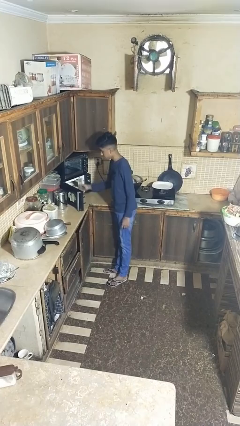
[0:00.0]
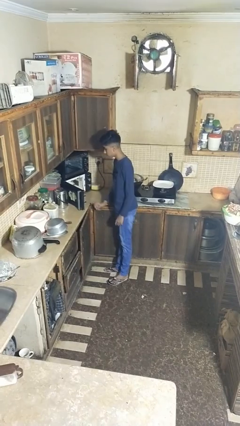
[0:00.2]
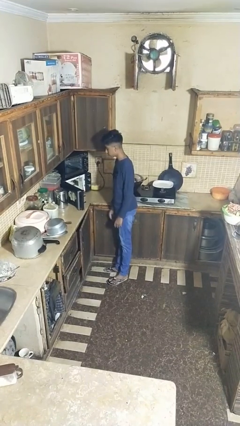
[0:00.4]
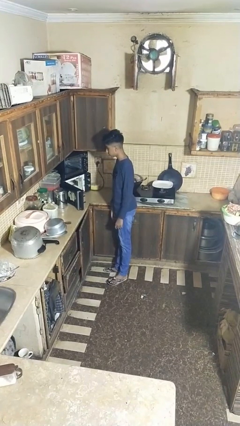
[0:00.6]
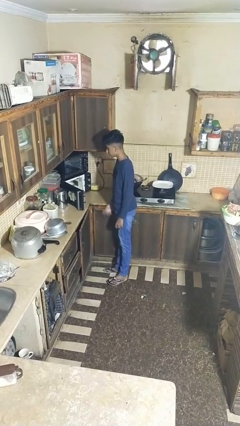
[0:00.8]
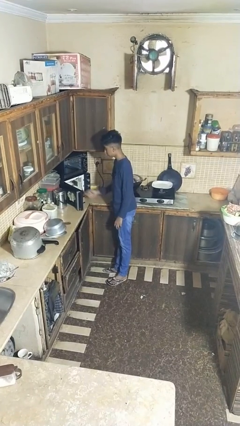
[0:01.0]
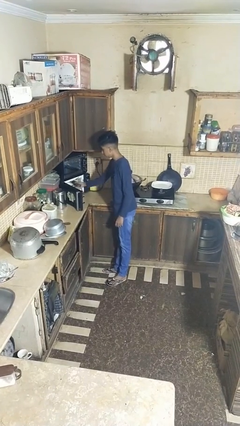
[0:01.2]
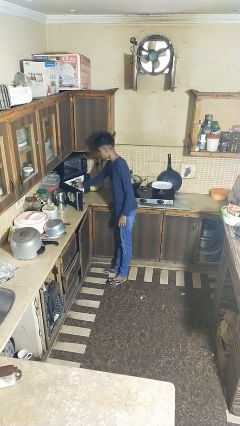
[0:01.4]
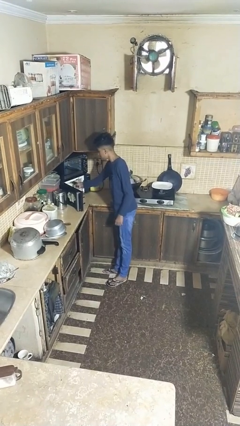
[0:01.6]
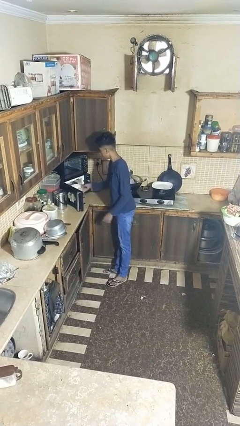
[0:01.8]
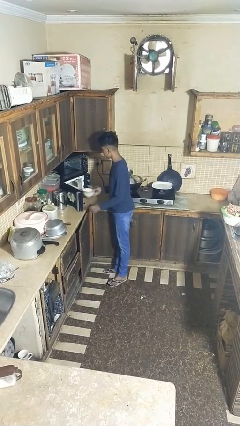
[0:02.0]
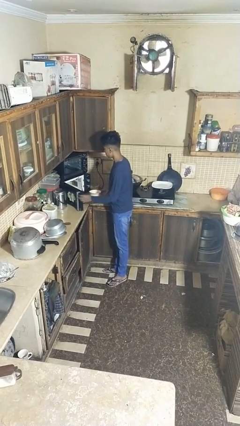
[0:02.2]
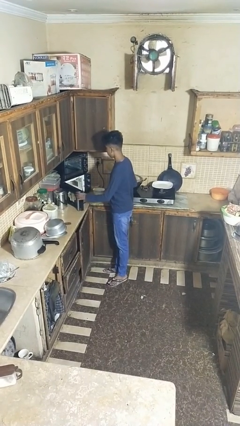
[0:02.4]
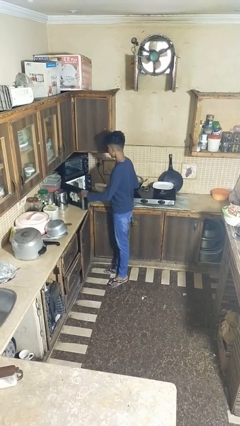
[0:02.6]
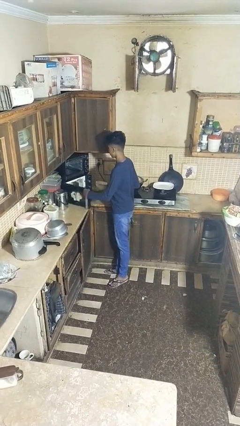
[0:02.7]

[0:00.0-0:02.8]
person takes object from microwave

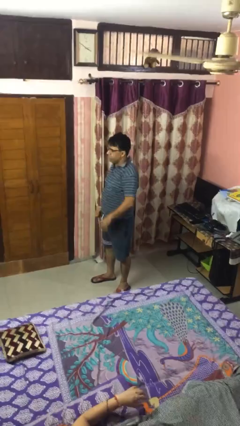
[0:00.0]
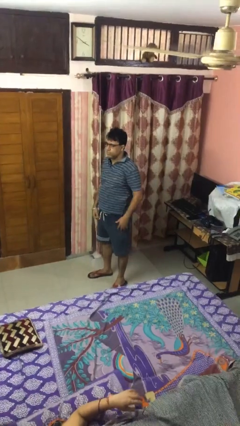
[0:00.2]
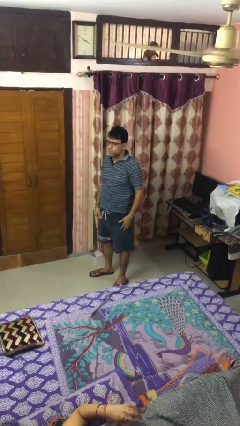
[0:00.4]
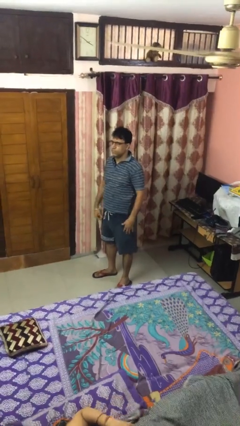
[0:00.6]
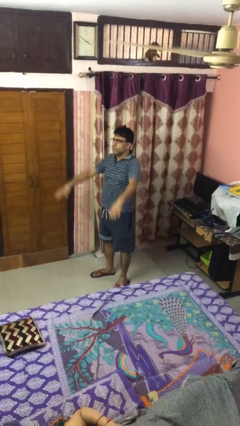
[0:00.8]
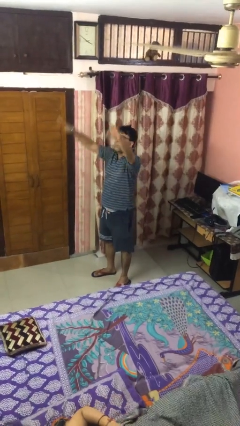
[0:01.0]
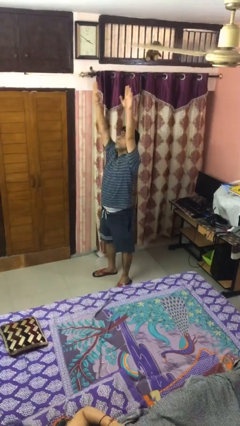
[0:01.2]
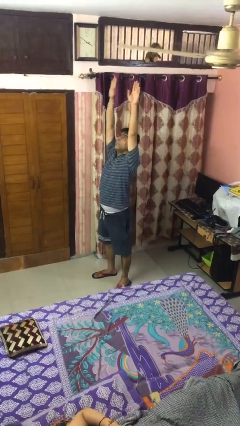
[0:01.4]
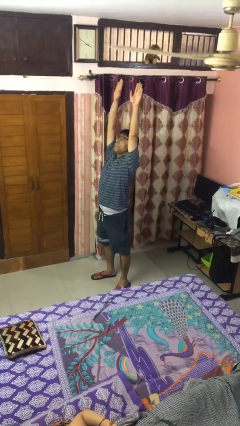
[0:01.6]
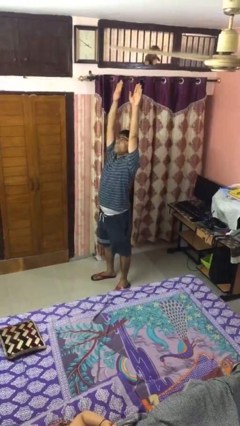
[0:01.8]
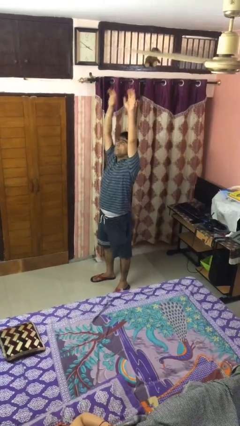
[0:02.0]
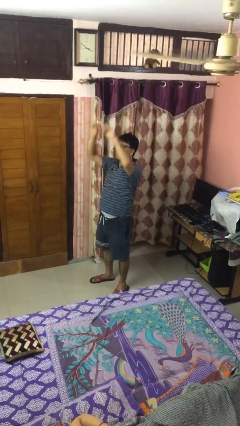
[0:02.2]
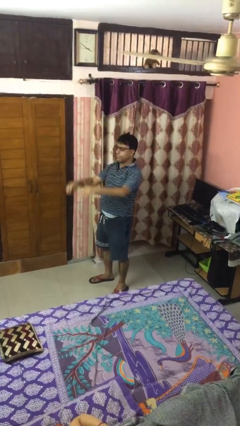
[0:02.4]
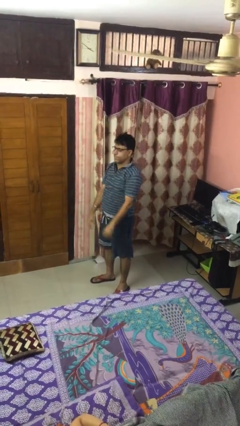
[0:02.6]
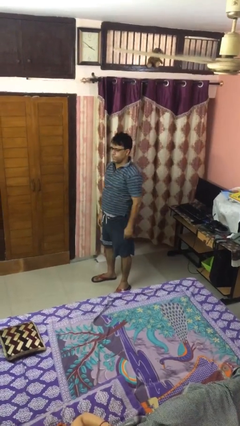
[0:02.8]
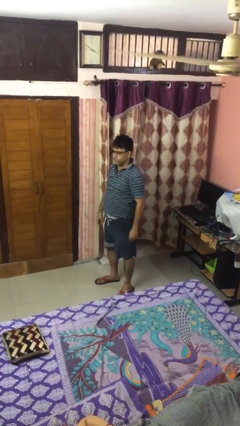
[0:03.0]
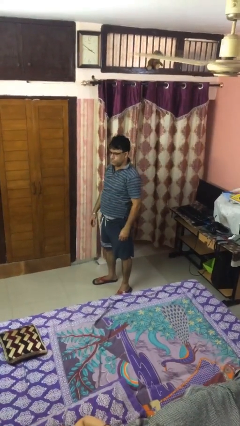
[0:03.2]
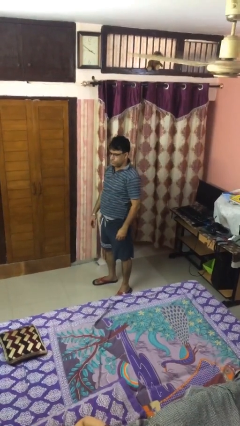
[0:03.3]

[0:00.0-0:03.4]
person stretches arms over head

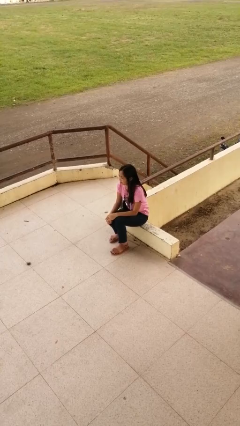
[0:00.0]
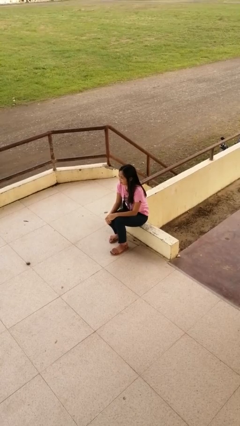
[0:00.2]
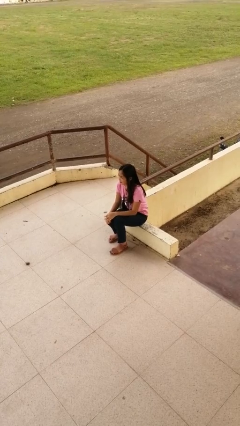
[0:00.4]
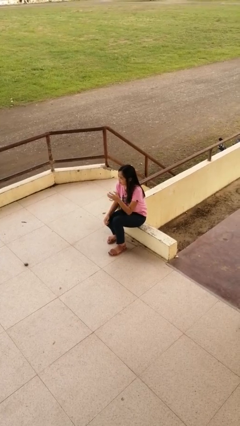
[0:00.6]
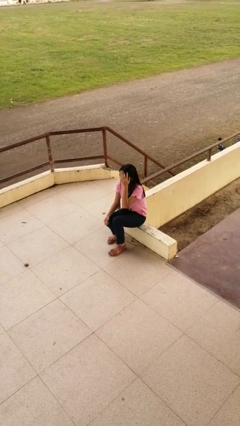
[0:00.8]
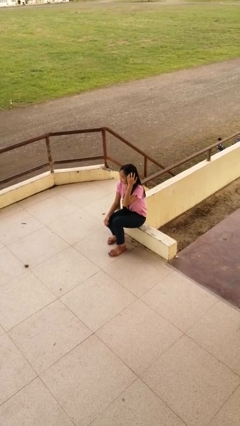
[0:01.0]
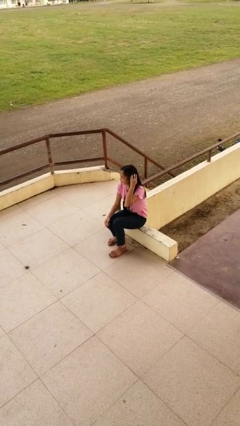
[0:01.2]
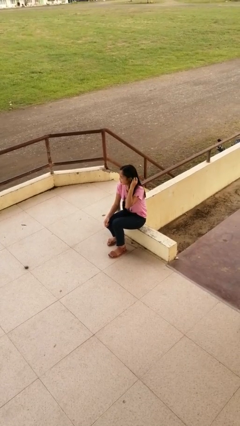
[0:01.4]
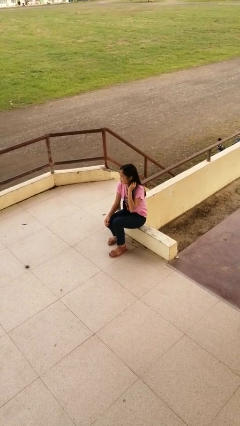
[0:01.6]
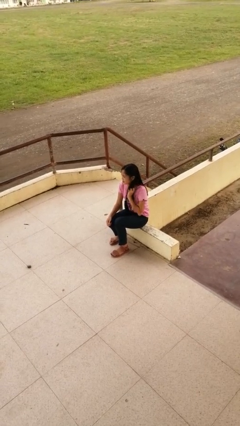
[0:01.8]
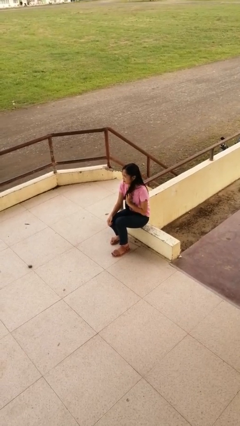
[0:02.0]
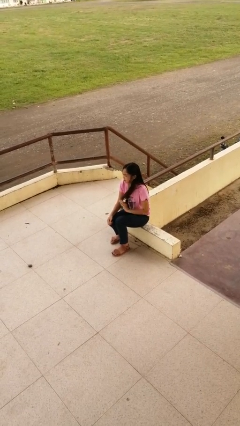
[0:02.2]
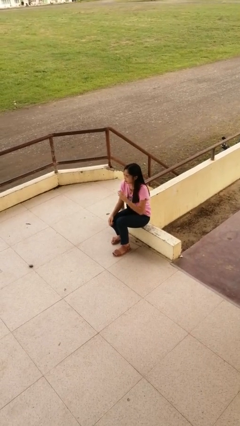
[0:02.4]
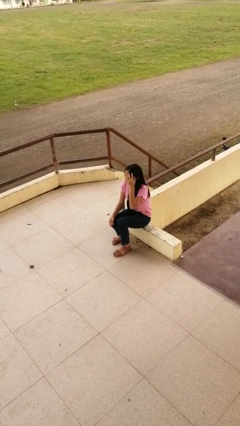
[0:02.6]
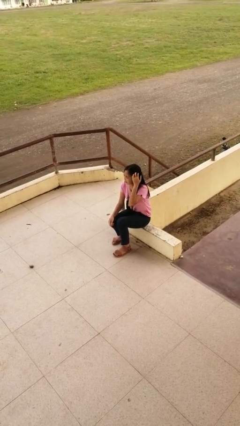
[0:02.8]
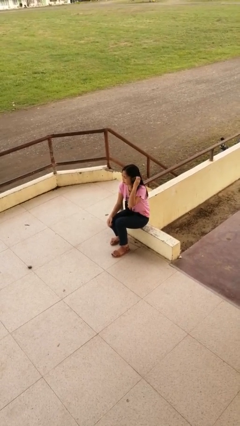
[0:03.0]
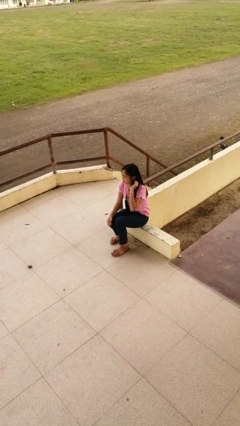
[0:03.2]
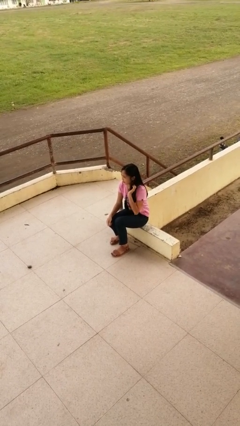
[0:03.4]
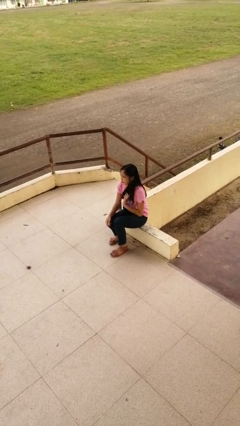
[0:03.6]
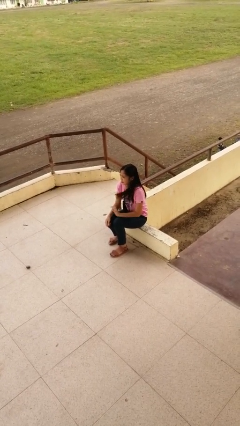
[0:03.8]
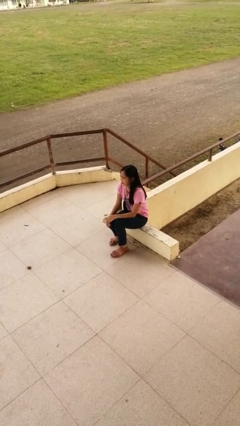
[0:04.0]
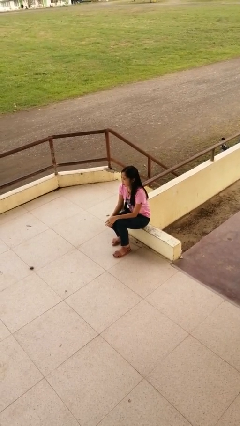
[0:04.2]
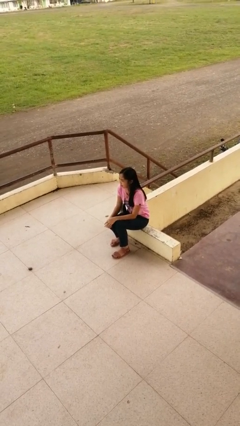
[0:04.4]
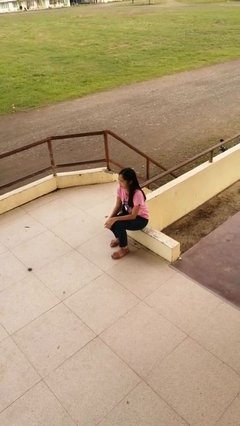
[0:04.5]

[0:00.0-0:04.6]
person strokes hair

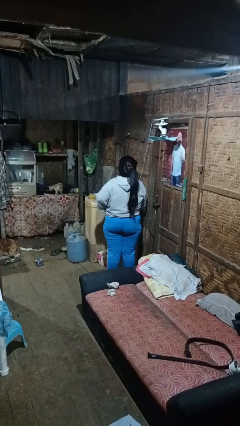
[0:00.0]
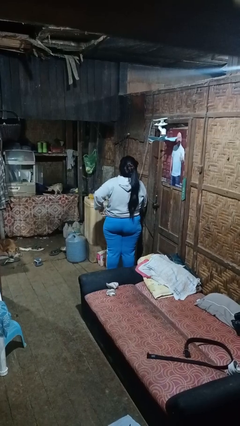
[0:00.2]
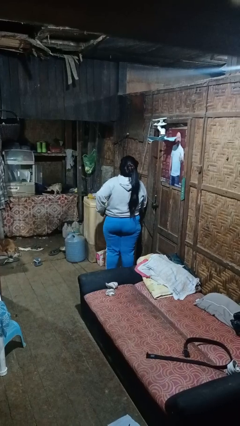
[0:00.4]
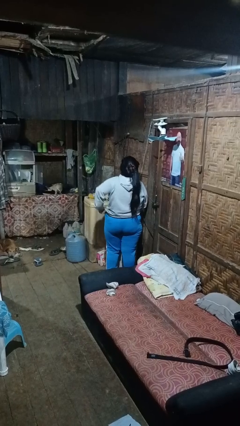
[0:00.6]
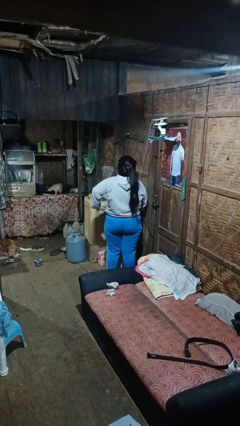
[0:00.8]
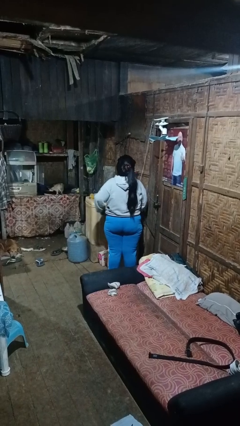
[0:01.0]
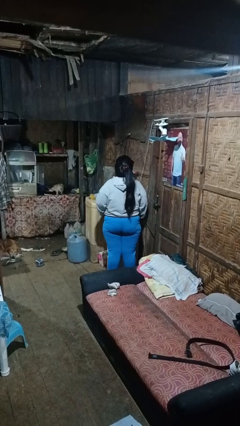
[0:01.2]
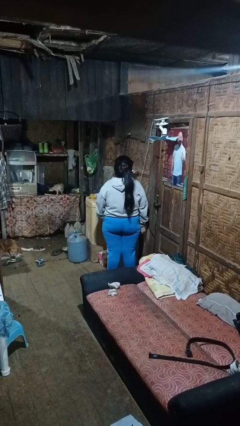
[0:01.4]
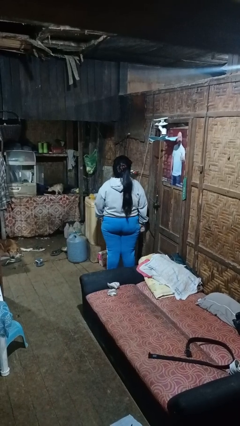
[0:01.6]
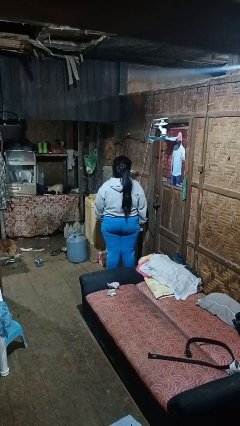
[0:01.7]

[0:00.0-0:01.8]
person hikes up pants

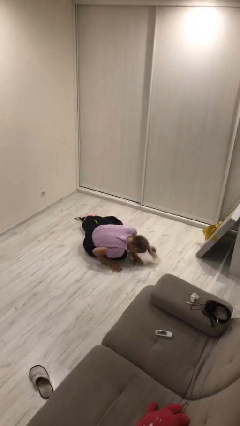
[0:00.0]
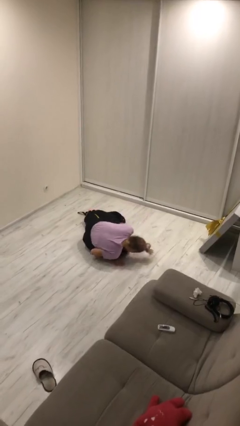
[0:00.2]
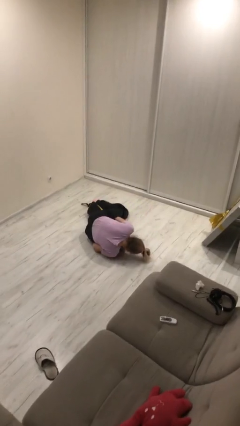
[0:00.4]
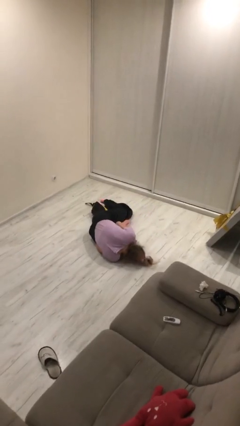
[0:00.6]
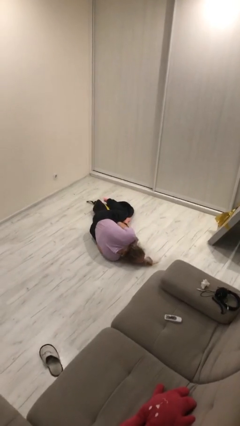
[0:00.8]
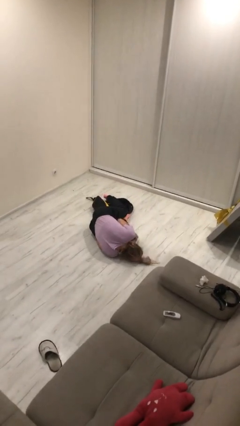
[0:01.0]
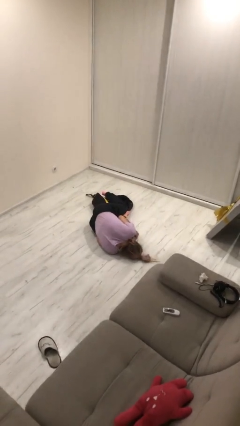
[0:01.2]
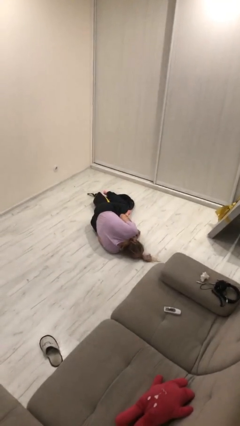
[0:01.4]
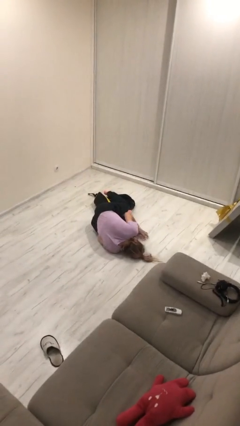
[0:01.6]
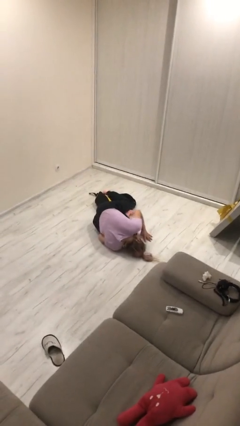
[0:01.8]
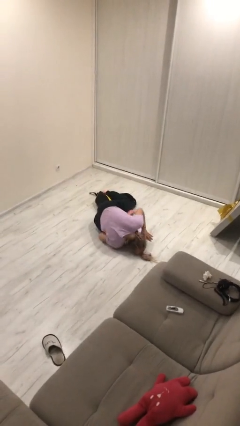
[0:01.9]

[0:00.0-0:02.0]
person lies down on floor

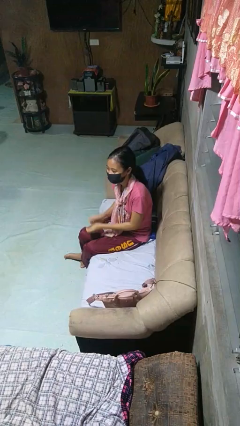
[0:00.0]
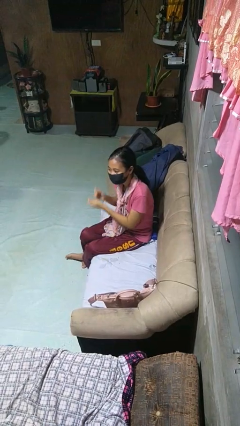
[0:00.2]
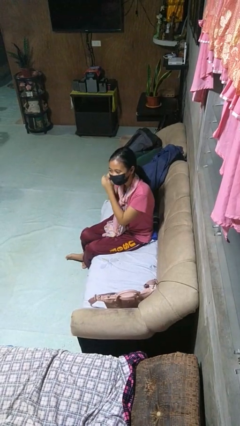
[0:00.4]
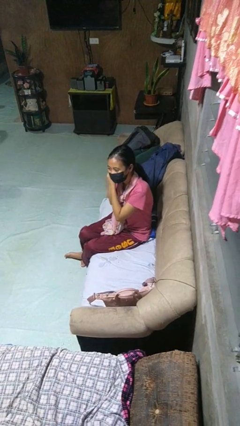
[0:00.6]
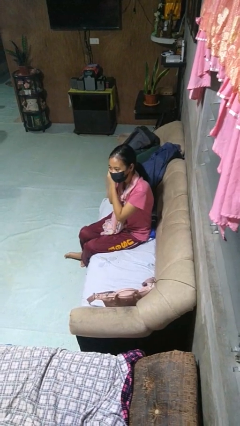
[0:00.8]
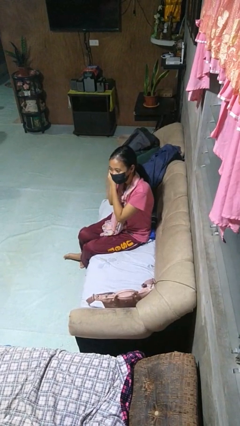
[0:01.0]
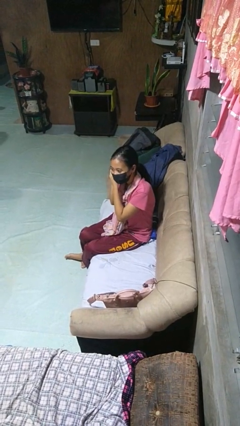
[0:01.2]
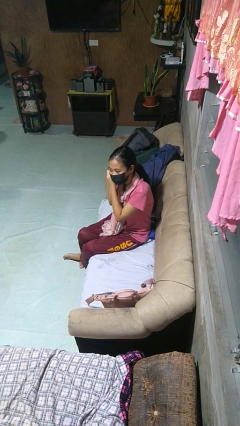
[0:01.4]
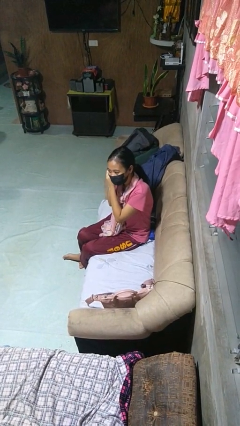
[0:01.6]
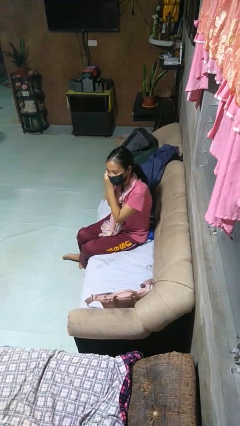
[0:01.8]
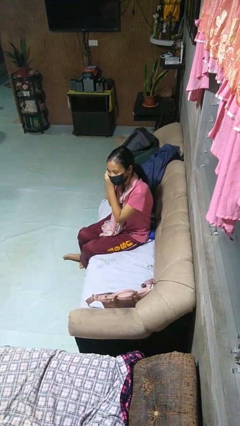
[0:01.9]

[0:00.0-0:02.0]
person takes off earrings

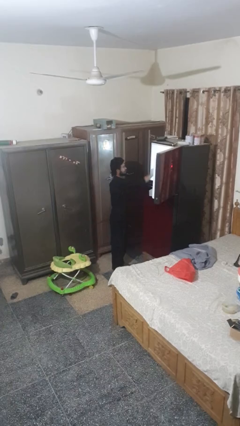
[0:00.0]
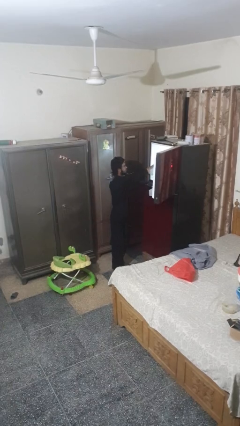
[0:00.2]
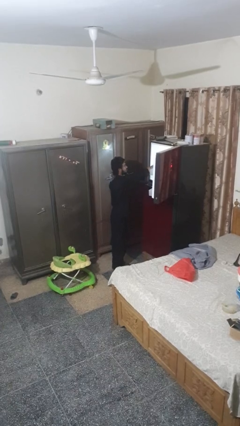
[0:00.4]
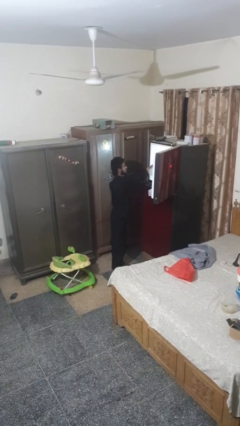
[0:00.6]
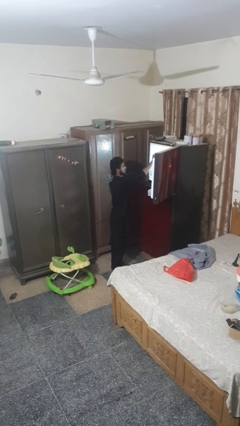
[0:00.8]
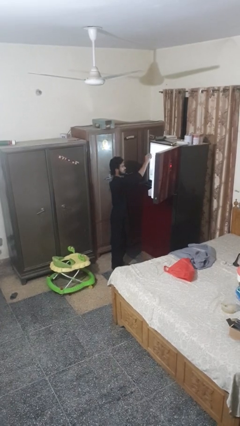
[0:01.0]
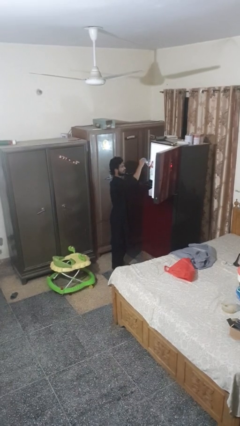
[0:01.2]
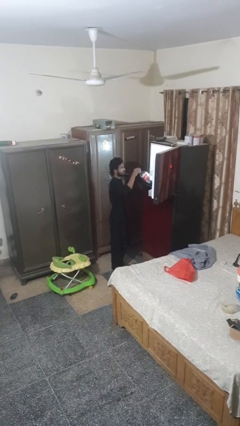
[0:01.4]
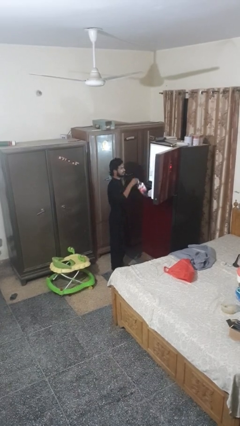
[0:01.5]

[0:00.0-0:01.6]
person takes object from refrigerator
